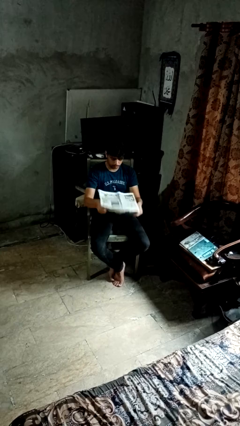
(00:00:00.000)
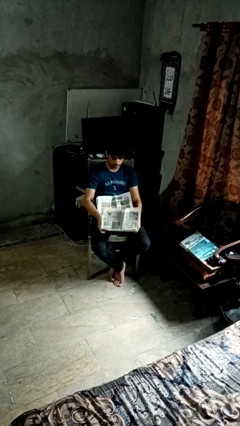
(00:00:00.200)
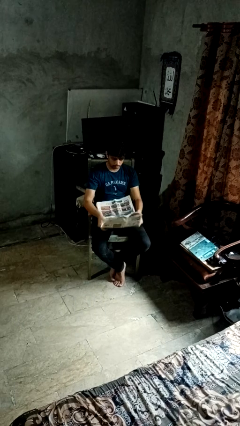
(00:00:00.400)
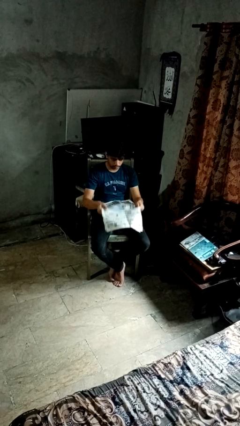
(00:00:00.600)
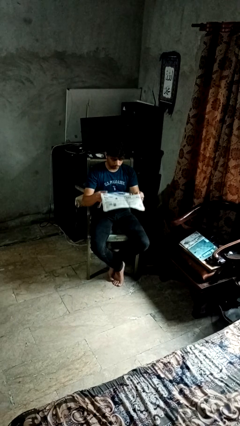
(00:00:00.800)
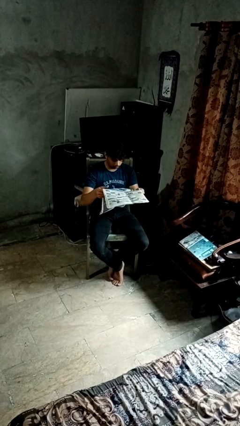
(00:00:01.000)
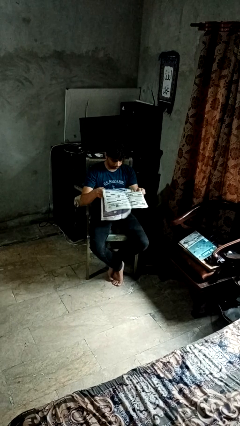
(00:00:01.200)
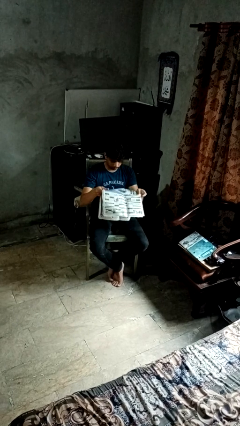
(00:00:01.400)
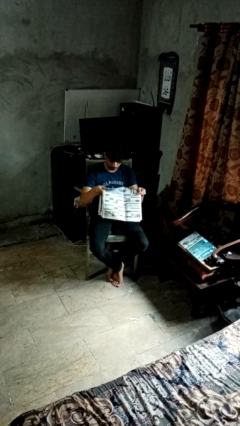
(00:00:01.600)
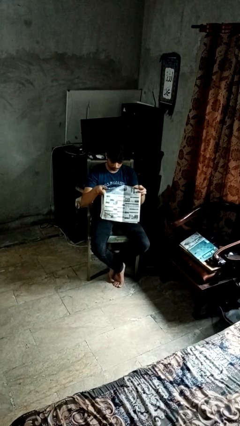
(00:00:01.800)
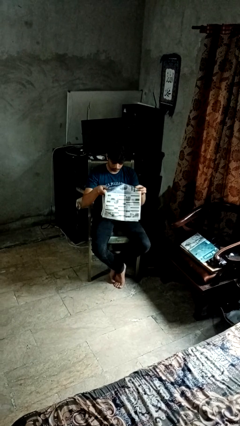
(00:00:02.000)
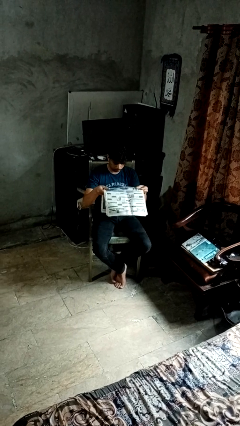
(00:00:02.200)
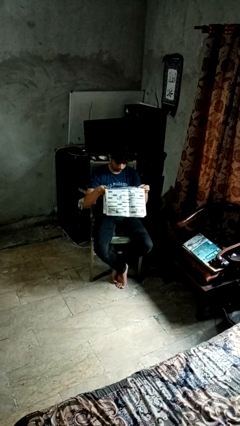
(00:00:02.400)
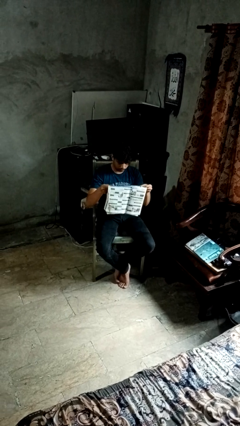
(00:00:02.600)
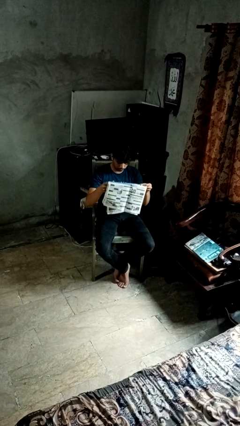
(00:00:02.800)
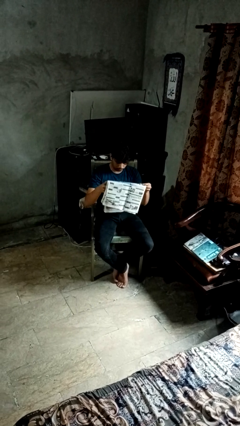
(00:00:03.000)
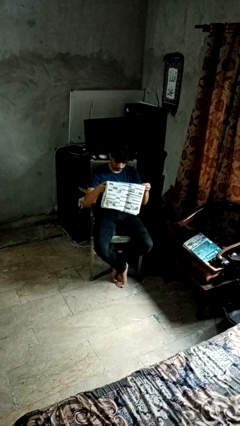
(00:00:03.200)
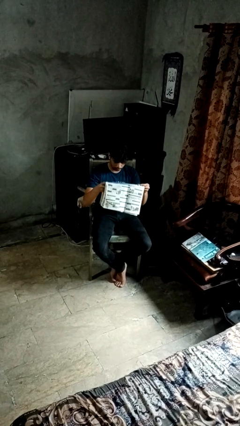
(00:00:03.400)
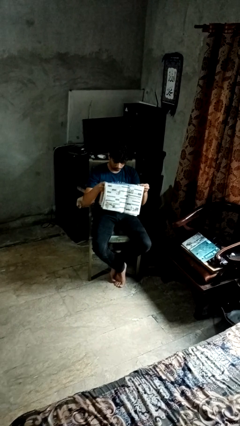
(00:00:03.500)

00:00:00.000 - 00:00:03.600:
person reads newspaper

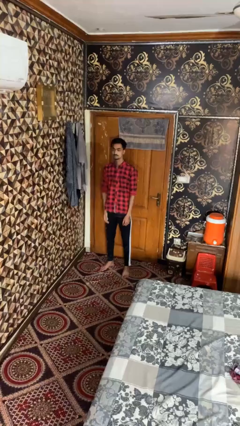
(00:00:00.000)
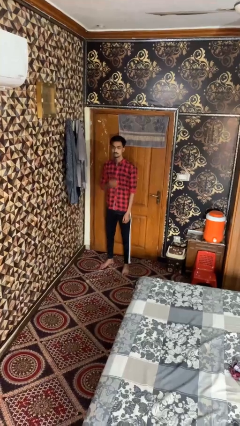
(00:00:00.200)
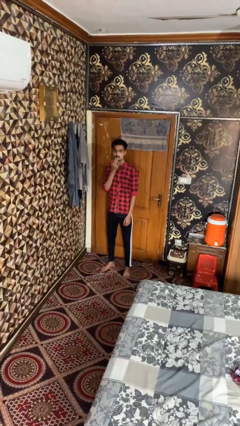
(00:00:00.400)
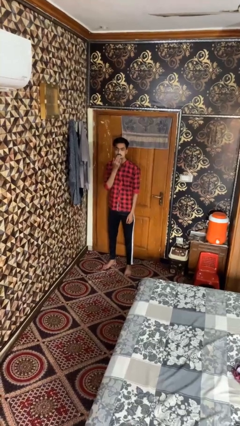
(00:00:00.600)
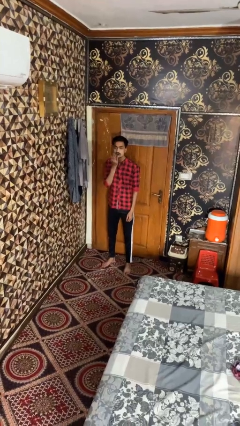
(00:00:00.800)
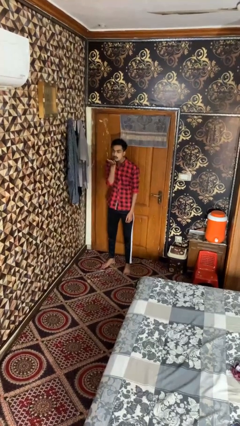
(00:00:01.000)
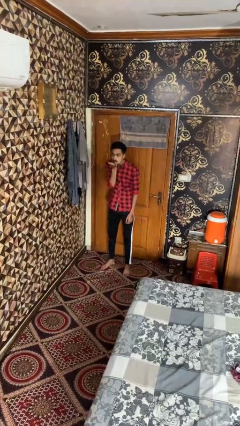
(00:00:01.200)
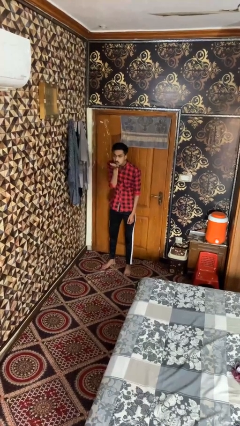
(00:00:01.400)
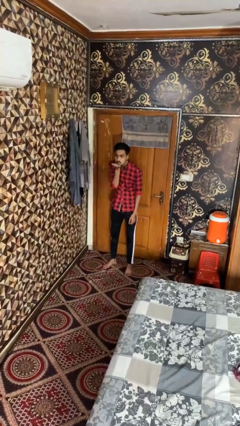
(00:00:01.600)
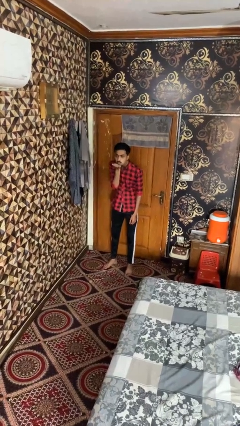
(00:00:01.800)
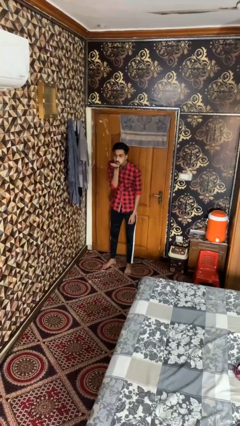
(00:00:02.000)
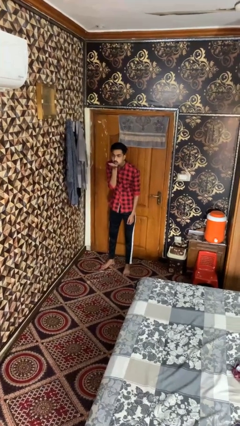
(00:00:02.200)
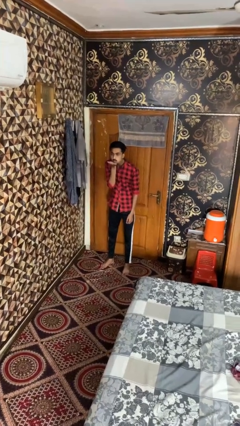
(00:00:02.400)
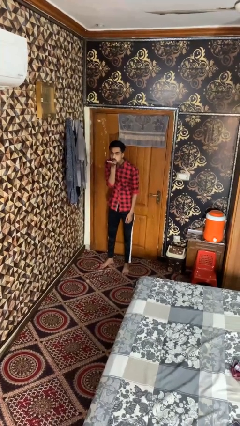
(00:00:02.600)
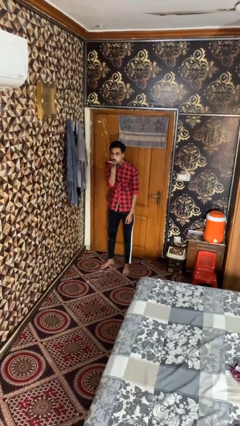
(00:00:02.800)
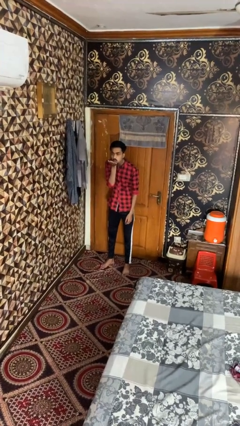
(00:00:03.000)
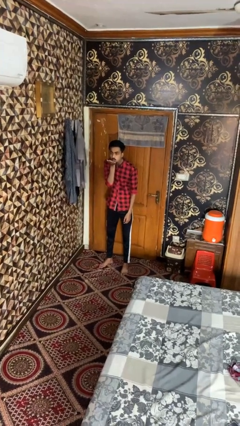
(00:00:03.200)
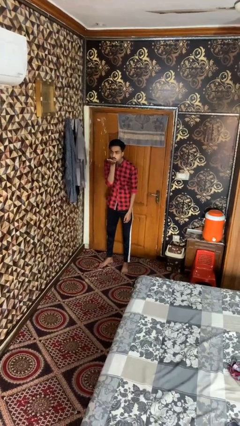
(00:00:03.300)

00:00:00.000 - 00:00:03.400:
person gestures blow kiss

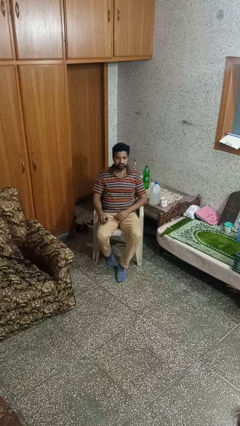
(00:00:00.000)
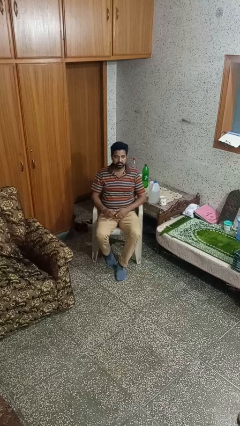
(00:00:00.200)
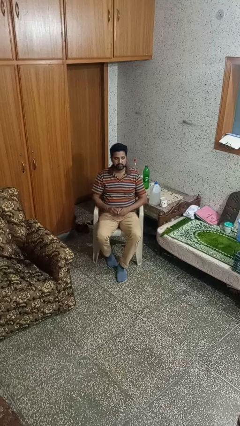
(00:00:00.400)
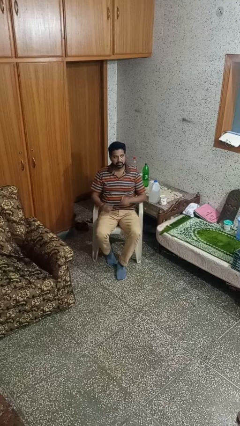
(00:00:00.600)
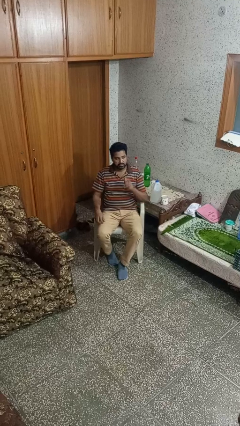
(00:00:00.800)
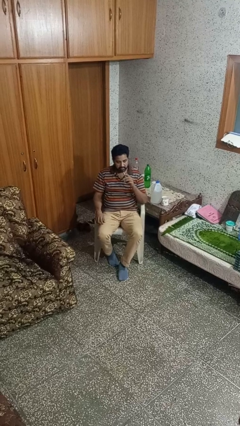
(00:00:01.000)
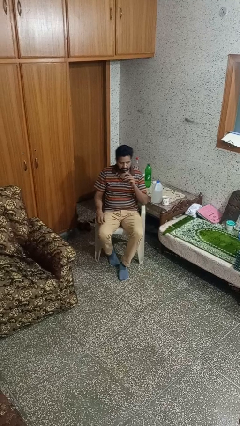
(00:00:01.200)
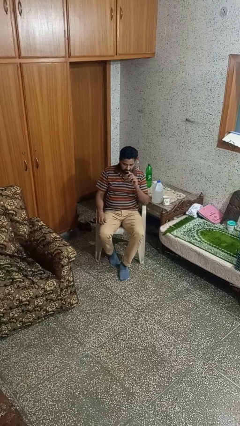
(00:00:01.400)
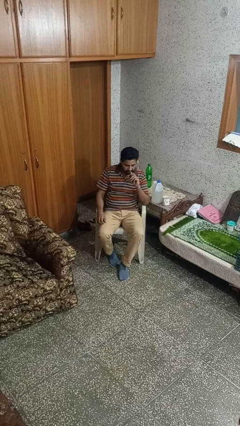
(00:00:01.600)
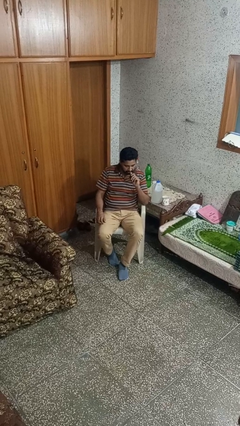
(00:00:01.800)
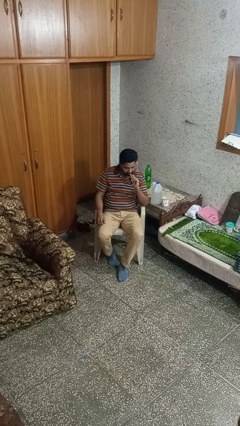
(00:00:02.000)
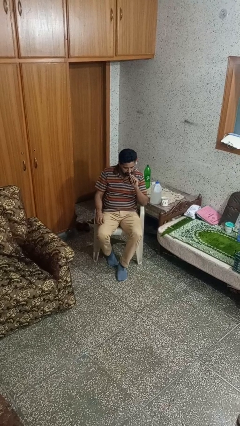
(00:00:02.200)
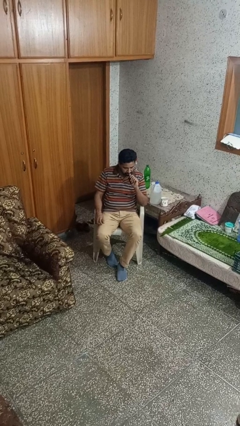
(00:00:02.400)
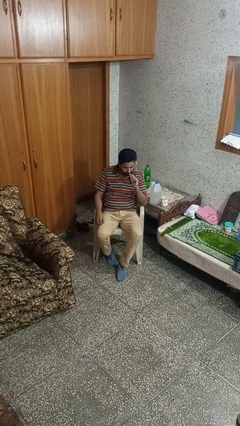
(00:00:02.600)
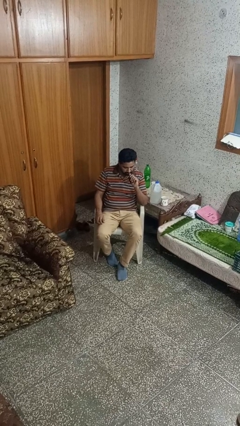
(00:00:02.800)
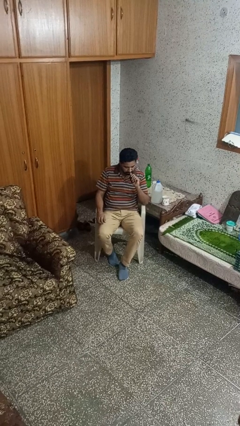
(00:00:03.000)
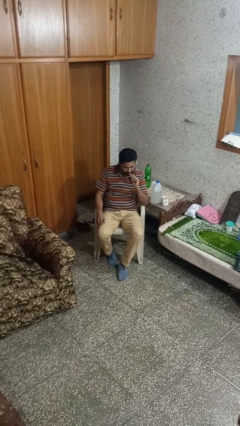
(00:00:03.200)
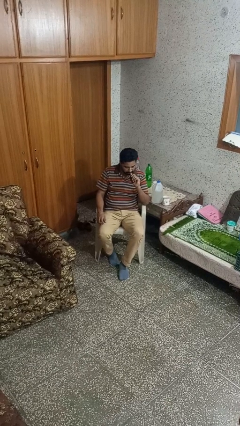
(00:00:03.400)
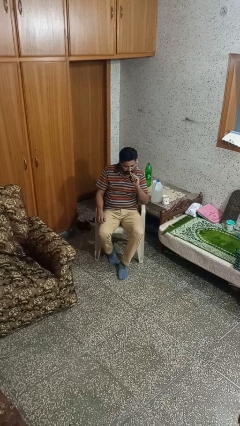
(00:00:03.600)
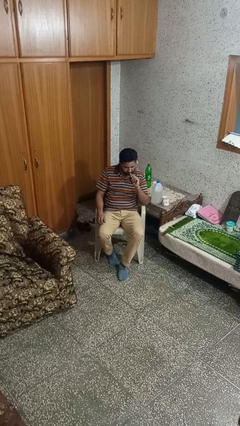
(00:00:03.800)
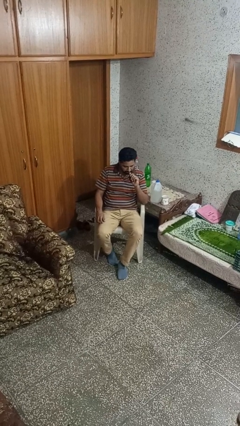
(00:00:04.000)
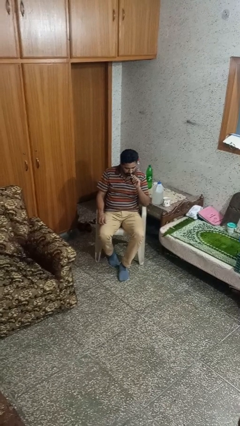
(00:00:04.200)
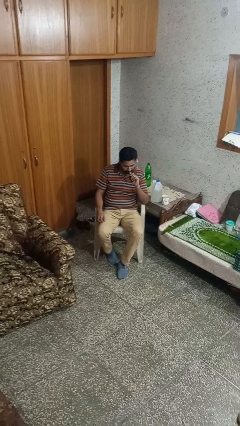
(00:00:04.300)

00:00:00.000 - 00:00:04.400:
person vapes

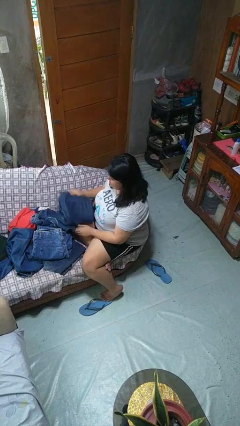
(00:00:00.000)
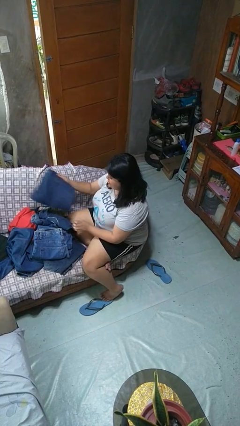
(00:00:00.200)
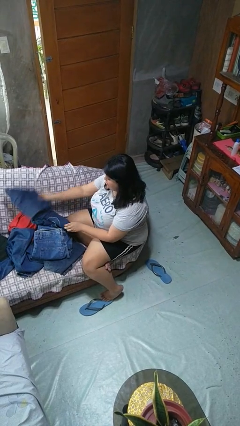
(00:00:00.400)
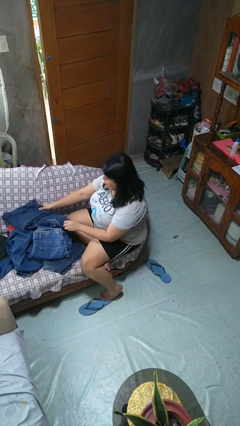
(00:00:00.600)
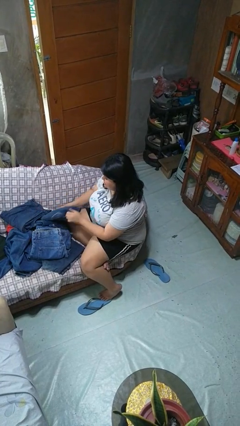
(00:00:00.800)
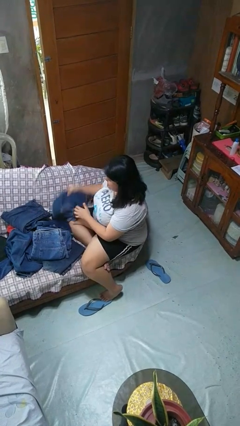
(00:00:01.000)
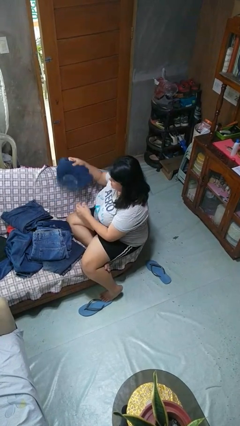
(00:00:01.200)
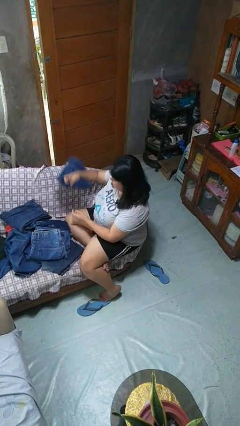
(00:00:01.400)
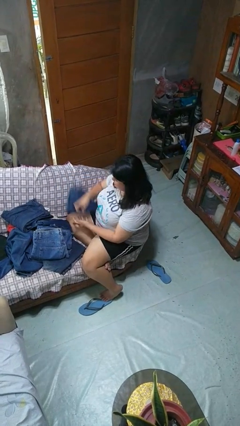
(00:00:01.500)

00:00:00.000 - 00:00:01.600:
person folds pants

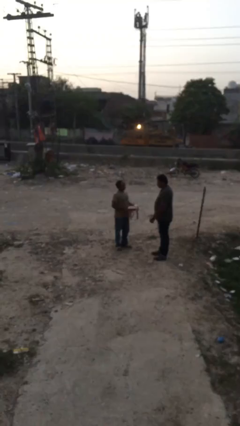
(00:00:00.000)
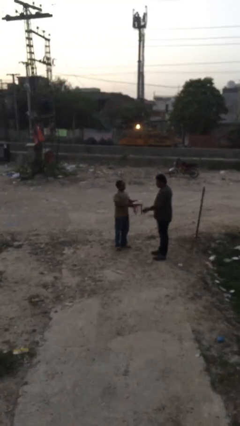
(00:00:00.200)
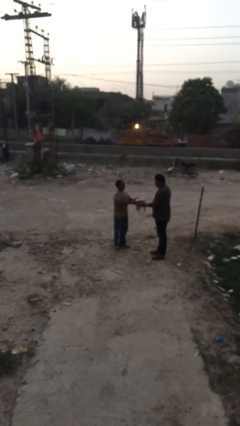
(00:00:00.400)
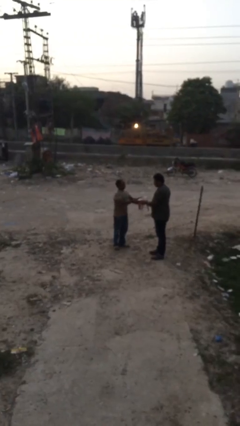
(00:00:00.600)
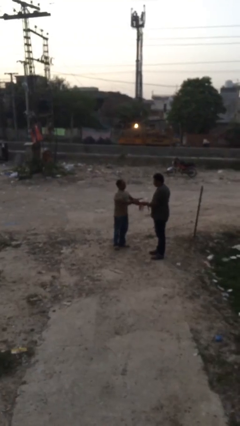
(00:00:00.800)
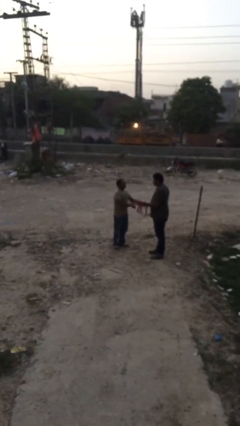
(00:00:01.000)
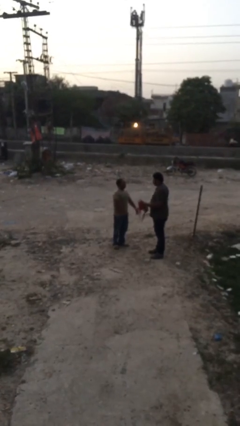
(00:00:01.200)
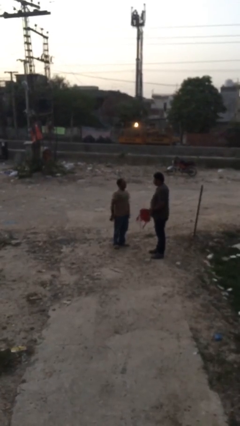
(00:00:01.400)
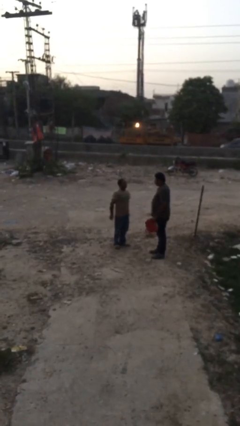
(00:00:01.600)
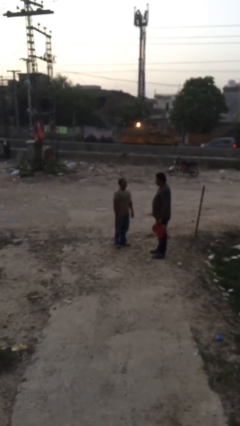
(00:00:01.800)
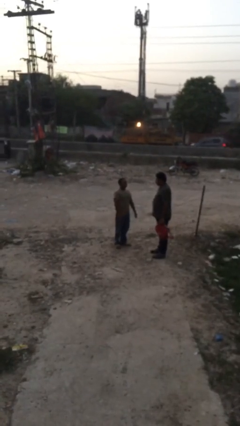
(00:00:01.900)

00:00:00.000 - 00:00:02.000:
person transfers object to person

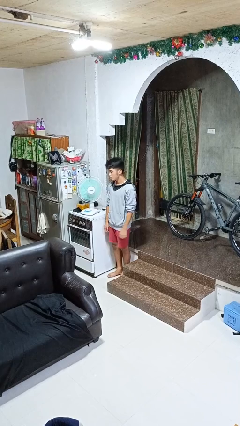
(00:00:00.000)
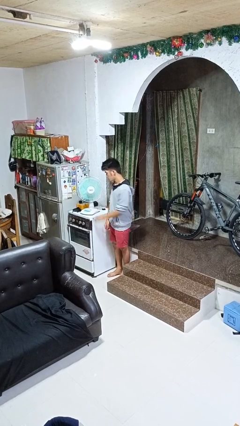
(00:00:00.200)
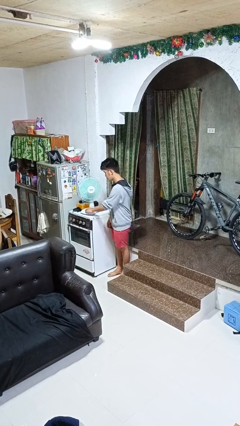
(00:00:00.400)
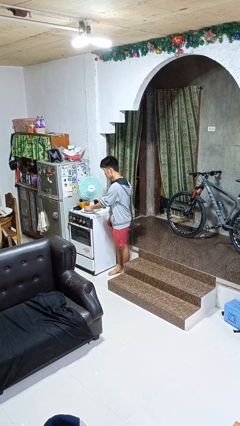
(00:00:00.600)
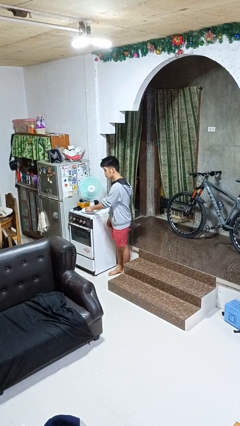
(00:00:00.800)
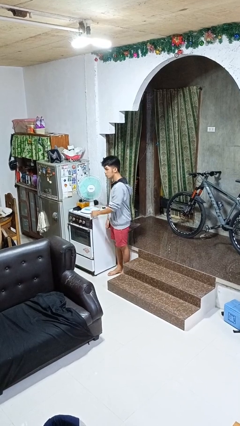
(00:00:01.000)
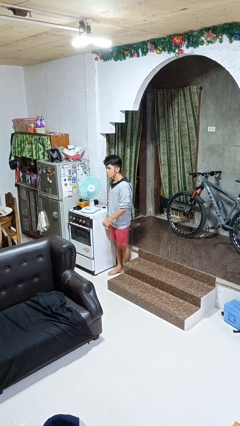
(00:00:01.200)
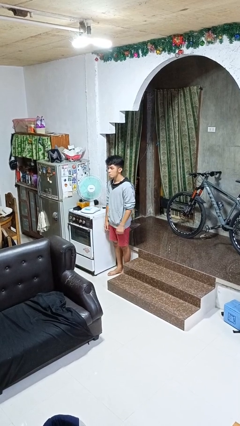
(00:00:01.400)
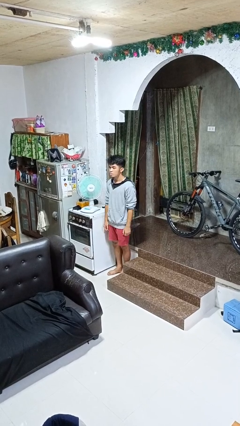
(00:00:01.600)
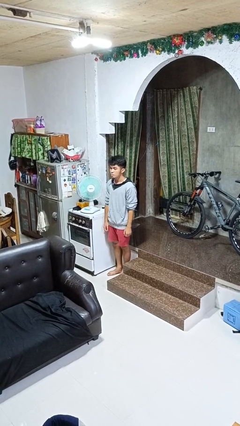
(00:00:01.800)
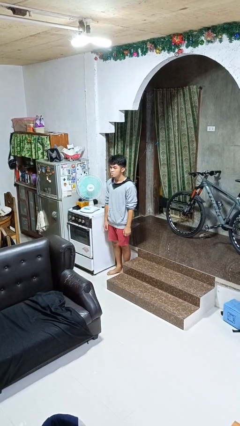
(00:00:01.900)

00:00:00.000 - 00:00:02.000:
person turns off fan
